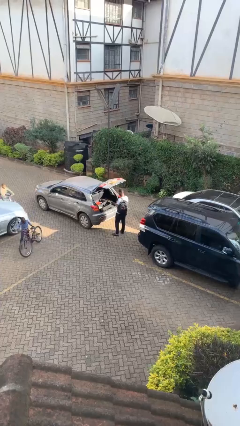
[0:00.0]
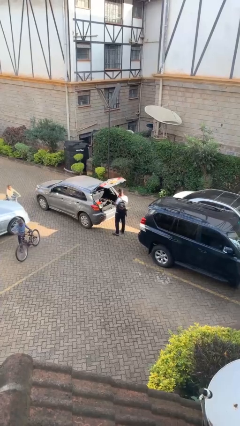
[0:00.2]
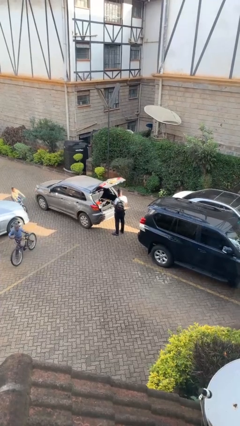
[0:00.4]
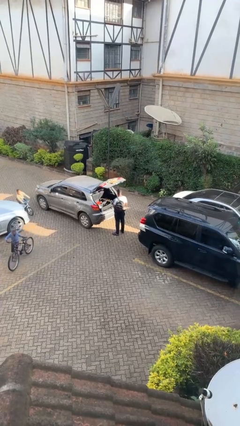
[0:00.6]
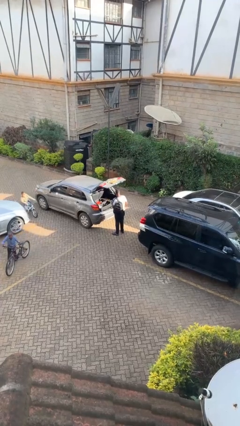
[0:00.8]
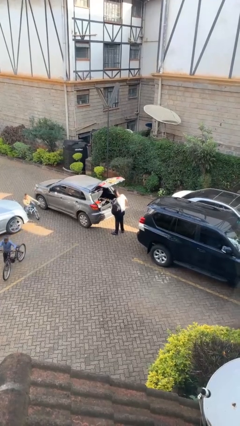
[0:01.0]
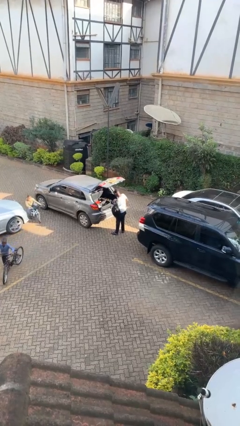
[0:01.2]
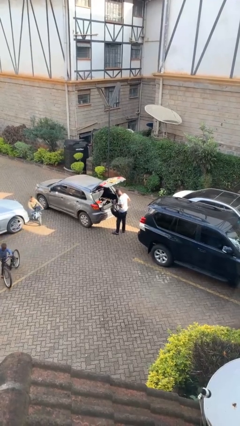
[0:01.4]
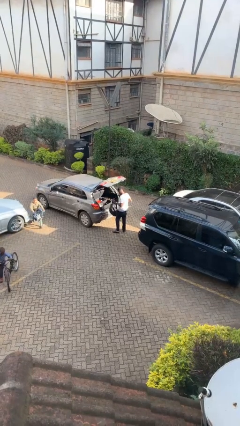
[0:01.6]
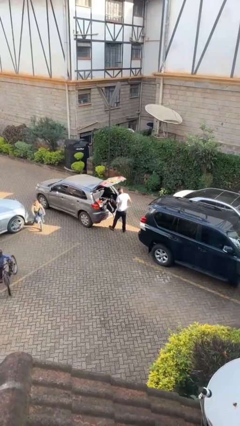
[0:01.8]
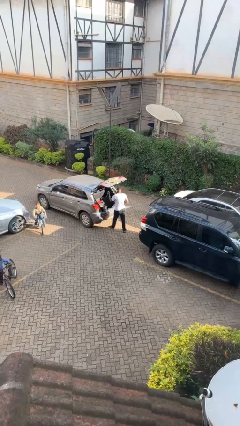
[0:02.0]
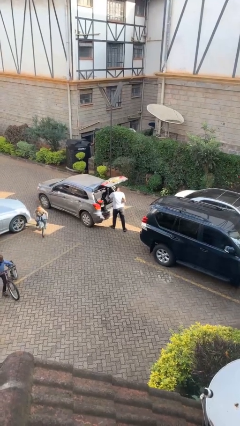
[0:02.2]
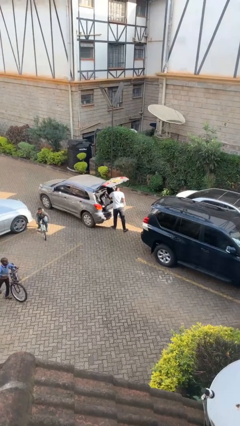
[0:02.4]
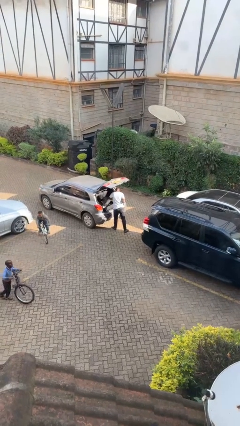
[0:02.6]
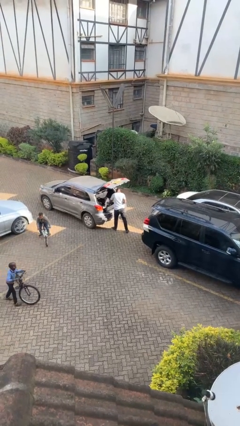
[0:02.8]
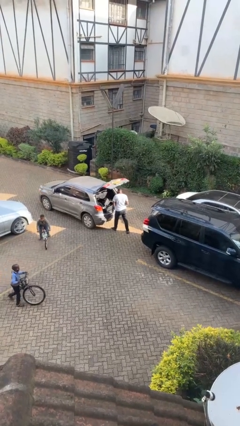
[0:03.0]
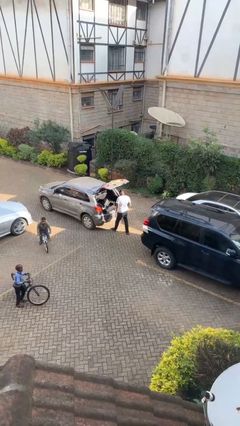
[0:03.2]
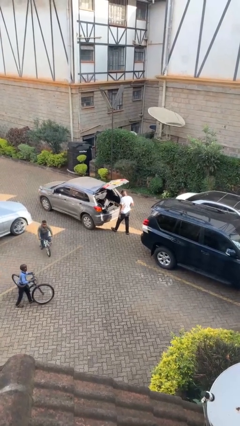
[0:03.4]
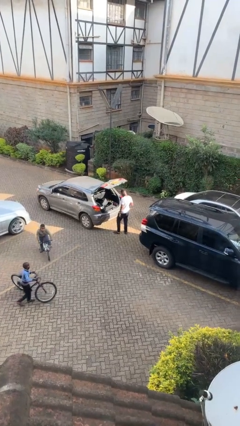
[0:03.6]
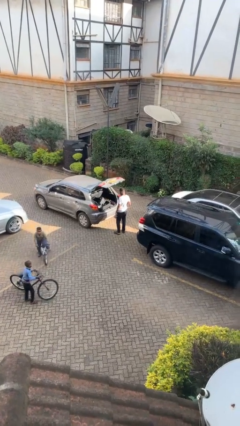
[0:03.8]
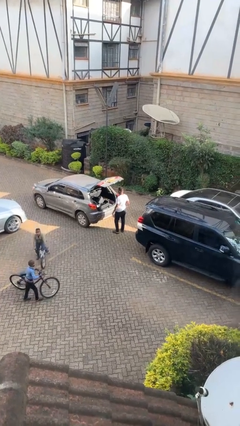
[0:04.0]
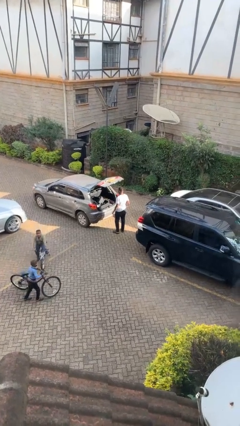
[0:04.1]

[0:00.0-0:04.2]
person loads car

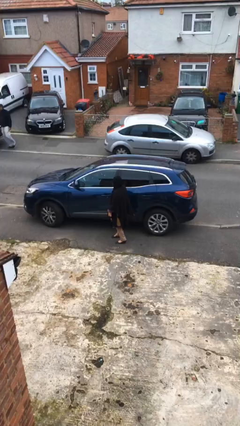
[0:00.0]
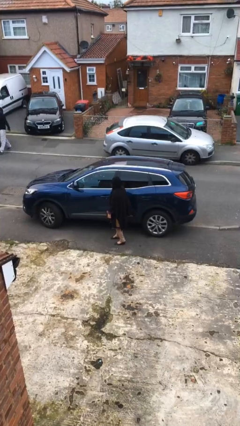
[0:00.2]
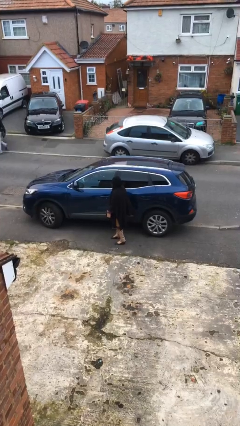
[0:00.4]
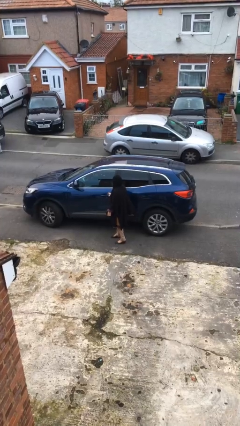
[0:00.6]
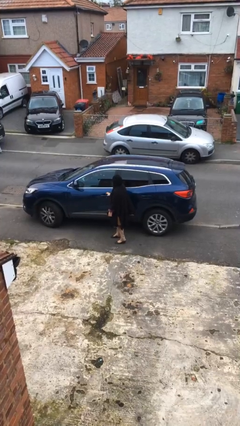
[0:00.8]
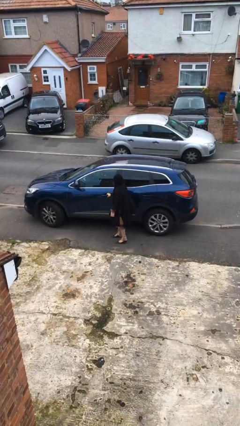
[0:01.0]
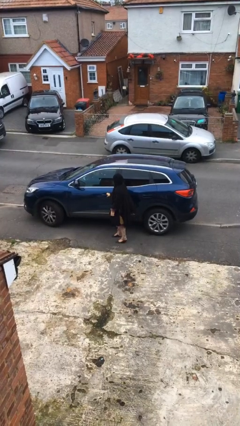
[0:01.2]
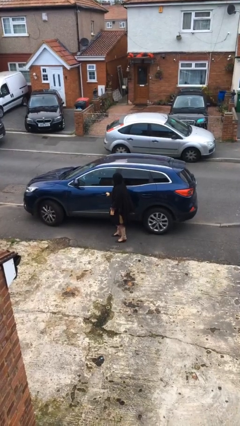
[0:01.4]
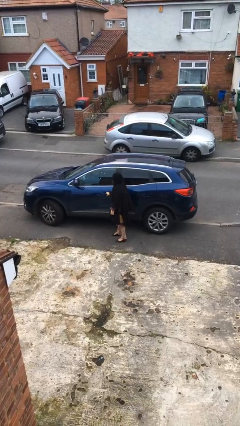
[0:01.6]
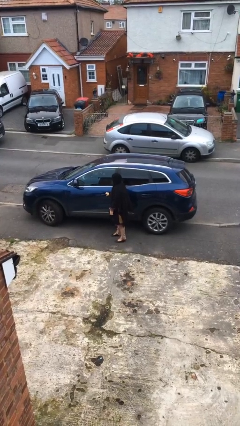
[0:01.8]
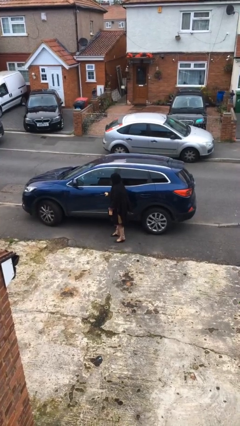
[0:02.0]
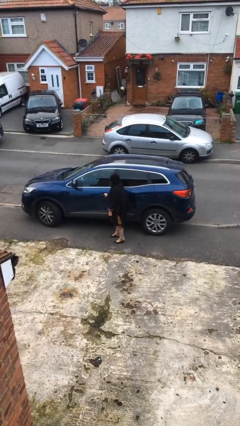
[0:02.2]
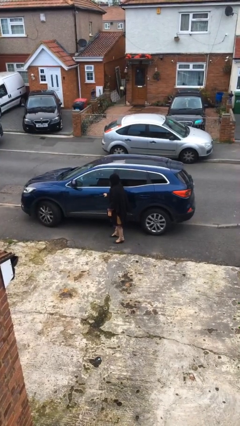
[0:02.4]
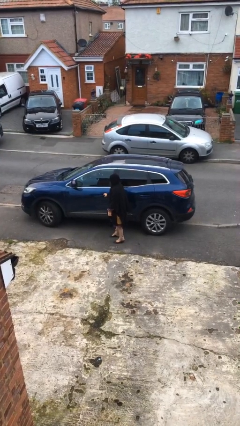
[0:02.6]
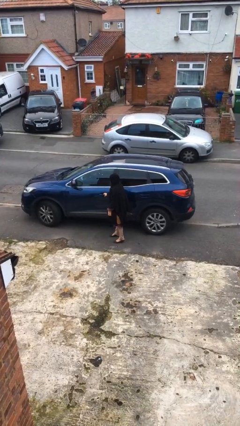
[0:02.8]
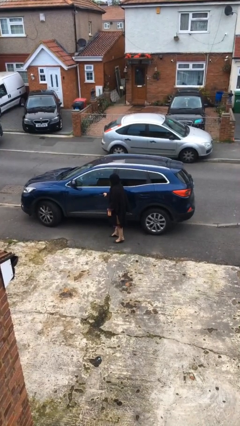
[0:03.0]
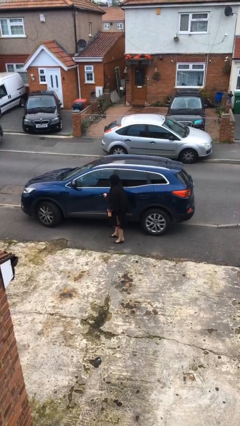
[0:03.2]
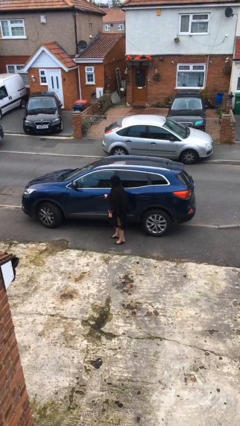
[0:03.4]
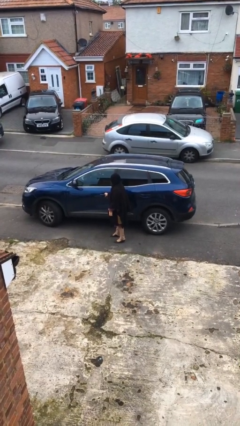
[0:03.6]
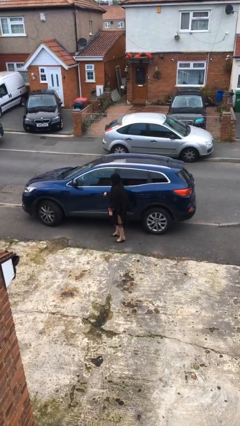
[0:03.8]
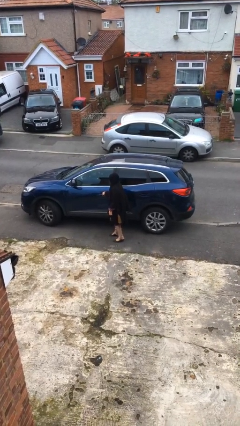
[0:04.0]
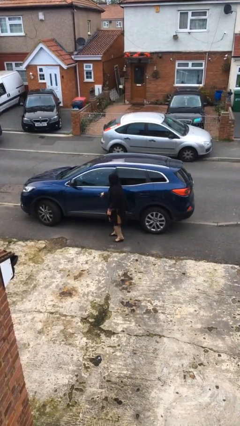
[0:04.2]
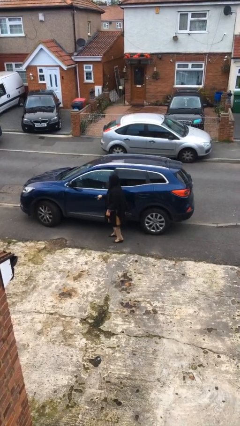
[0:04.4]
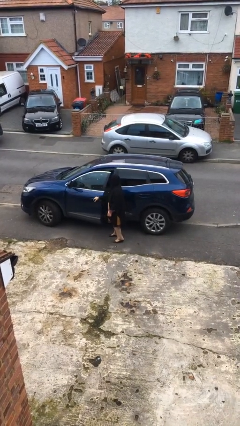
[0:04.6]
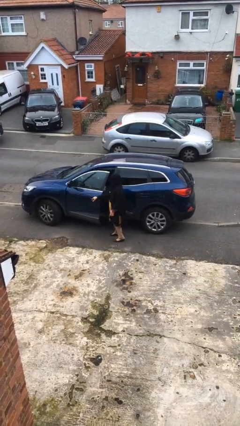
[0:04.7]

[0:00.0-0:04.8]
person opens car door

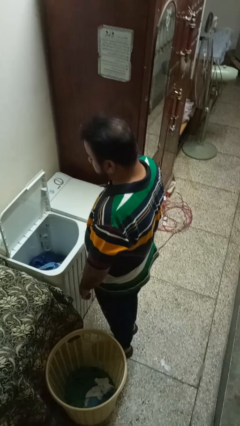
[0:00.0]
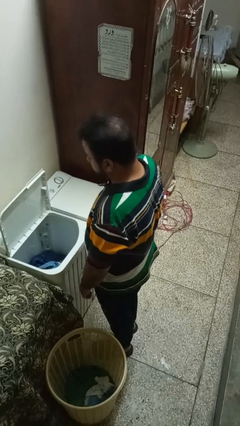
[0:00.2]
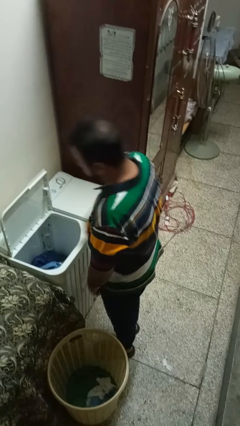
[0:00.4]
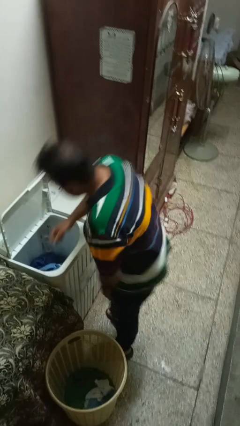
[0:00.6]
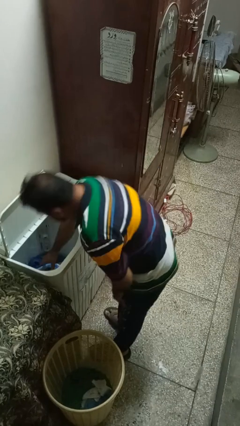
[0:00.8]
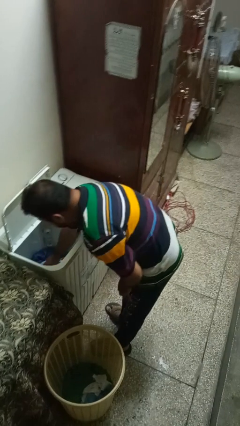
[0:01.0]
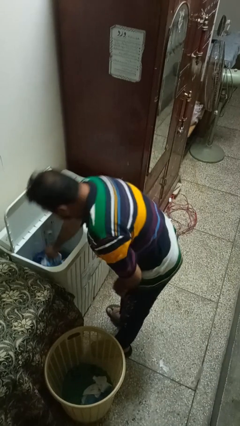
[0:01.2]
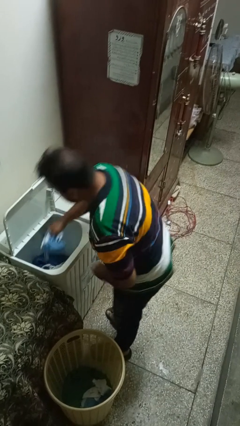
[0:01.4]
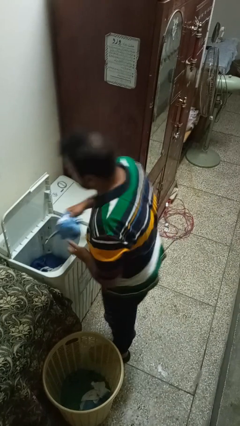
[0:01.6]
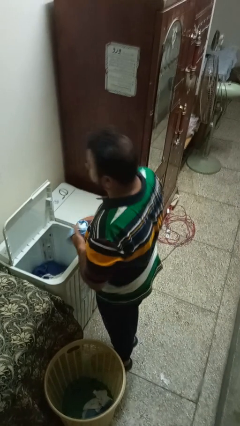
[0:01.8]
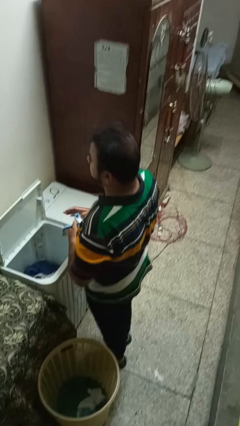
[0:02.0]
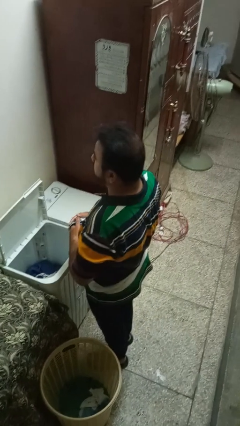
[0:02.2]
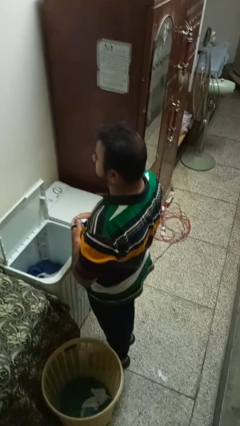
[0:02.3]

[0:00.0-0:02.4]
person unloads clotheswasher

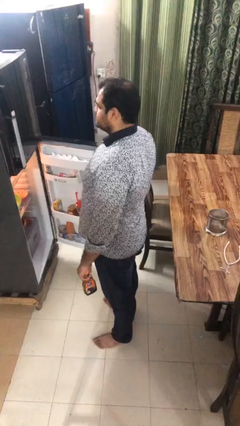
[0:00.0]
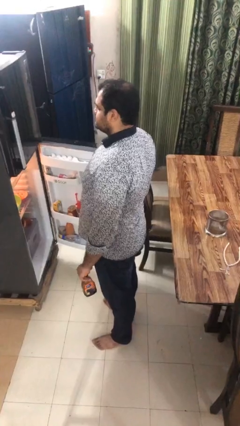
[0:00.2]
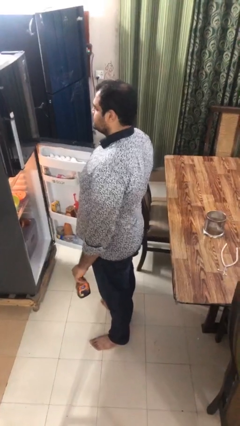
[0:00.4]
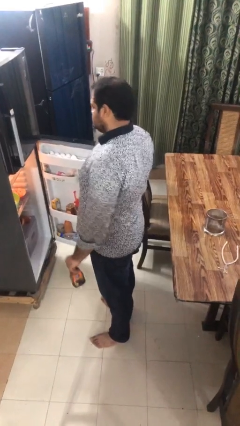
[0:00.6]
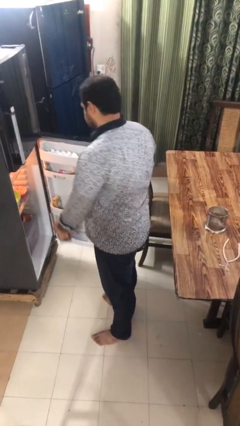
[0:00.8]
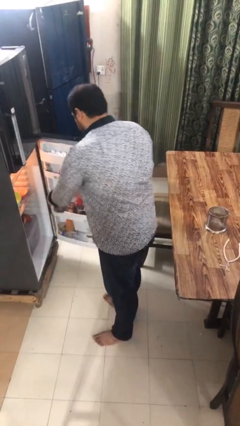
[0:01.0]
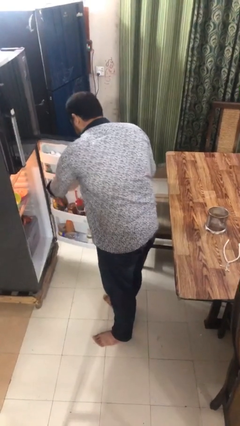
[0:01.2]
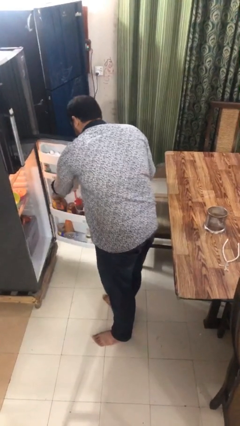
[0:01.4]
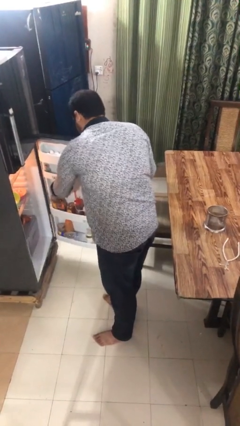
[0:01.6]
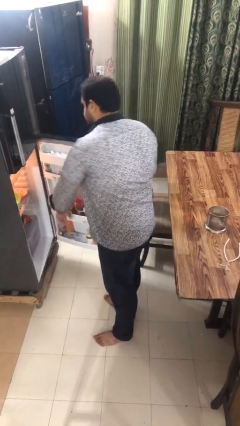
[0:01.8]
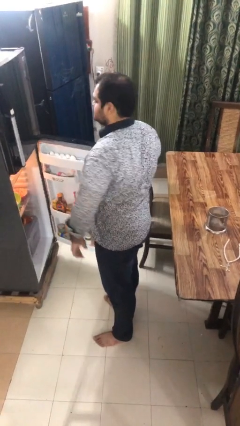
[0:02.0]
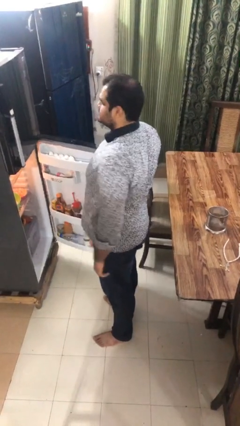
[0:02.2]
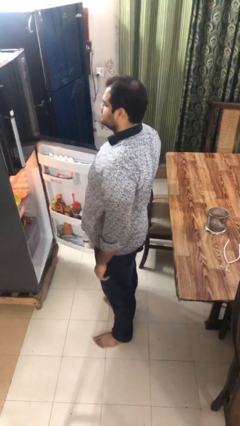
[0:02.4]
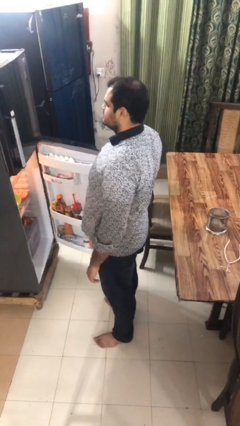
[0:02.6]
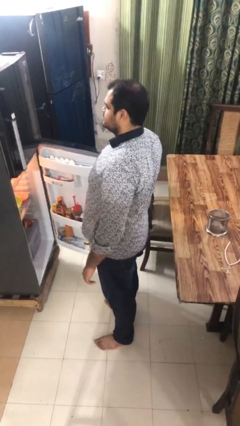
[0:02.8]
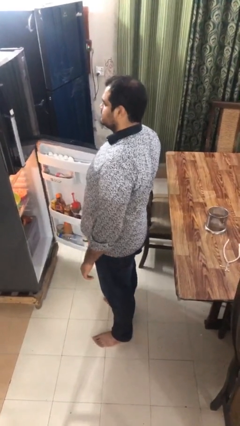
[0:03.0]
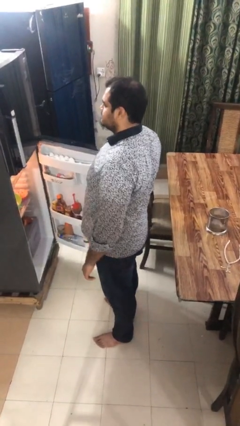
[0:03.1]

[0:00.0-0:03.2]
person puts object into refrigerator

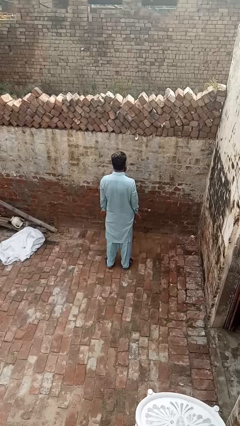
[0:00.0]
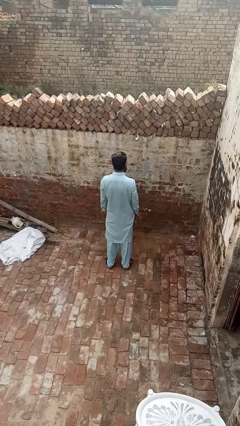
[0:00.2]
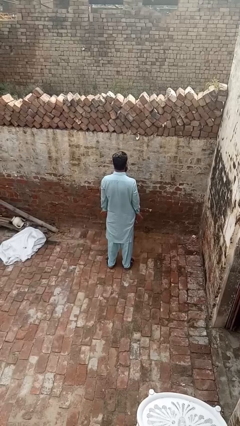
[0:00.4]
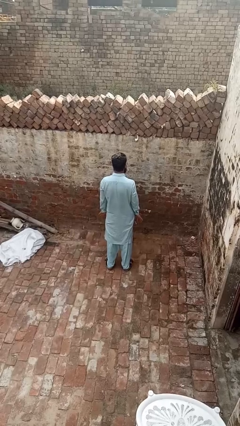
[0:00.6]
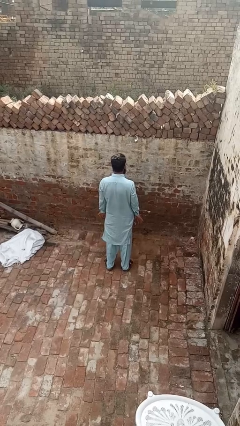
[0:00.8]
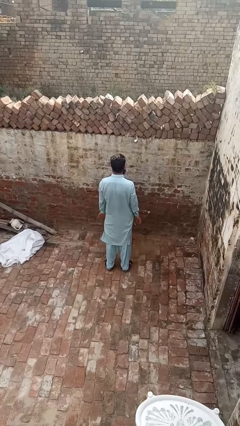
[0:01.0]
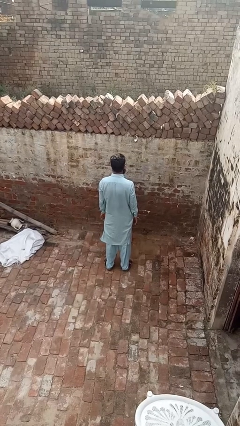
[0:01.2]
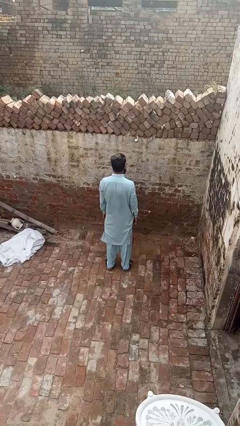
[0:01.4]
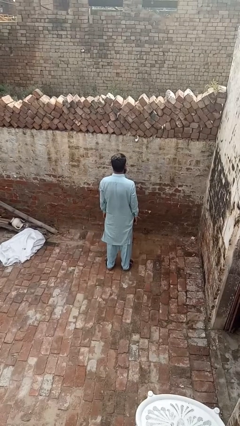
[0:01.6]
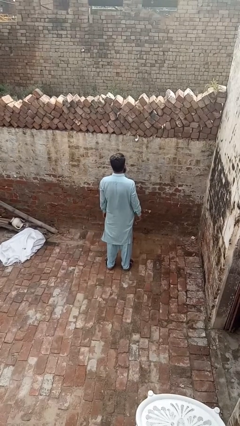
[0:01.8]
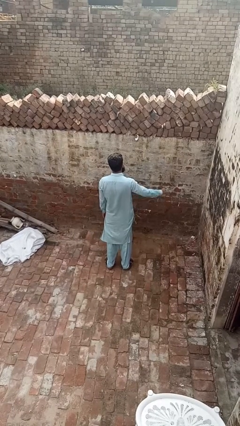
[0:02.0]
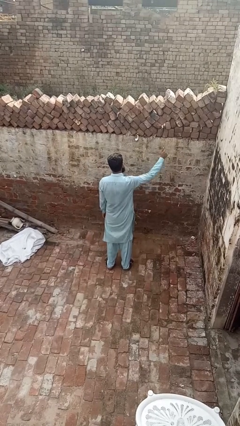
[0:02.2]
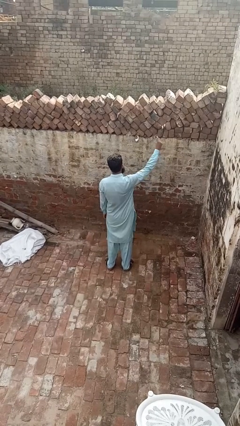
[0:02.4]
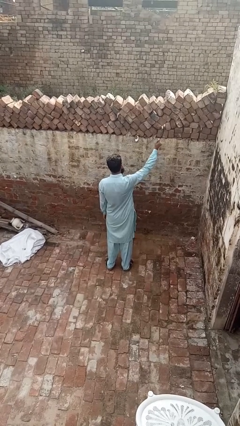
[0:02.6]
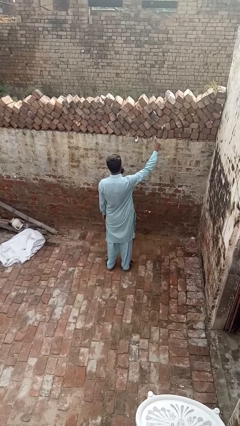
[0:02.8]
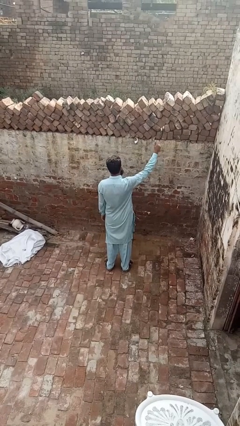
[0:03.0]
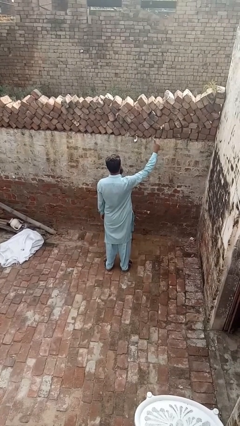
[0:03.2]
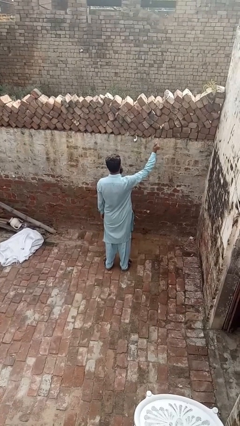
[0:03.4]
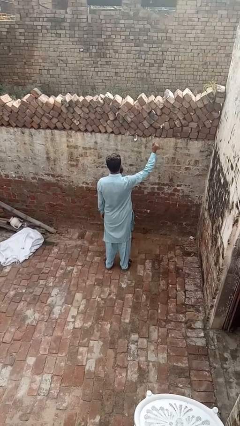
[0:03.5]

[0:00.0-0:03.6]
person snaps fingers
